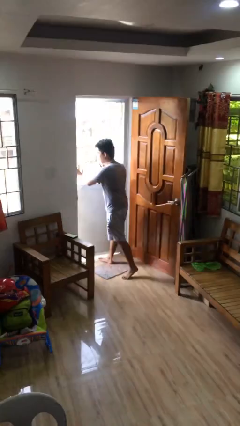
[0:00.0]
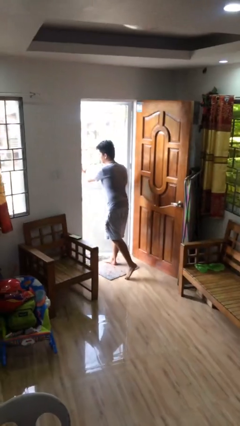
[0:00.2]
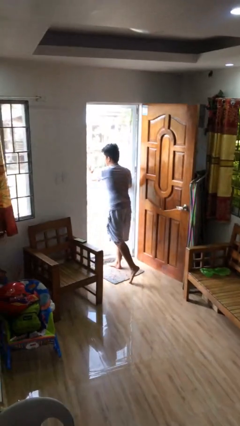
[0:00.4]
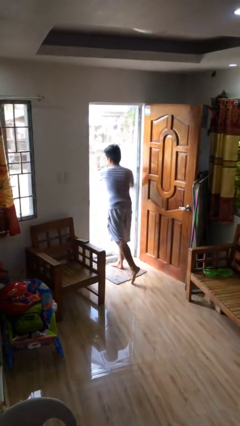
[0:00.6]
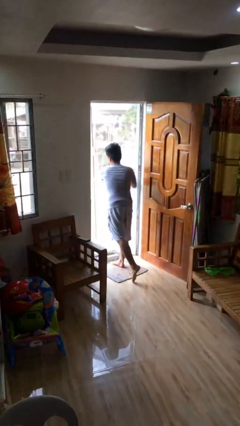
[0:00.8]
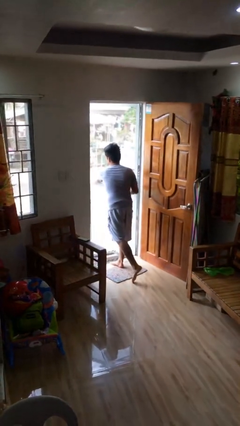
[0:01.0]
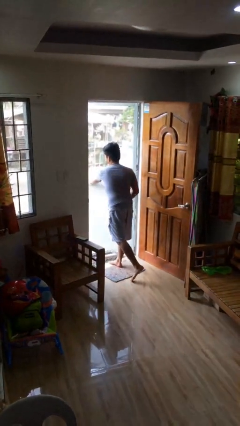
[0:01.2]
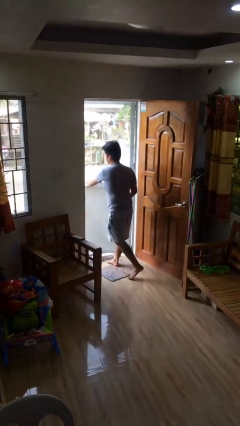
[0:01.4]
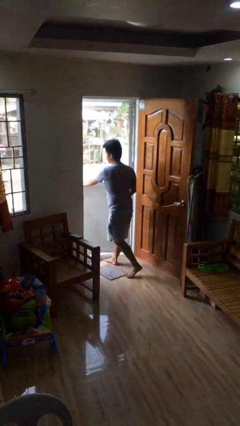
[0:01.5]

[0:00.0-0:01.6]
person opens facility door

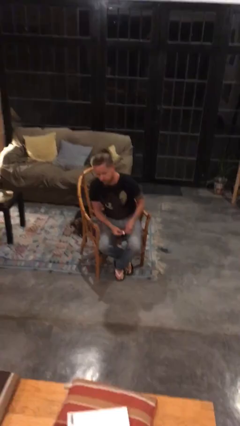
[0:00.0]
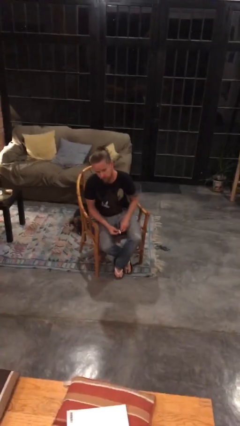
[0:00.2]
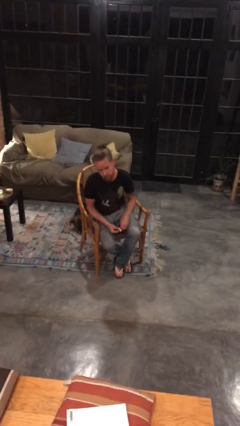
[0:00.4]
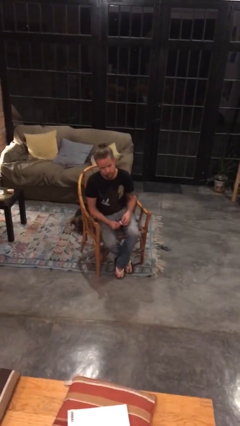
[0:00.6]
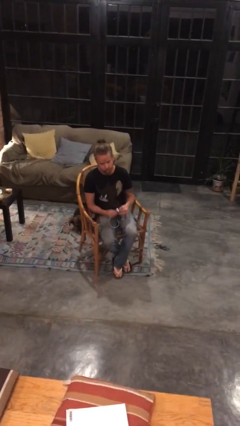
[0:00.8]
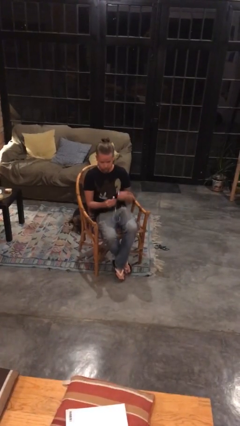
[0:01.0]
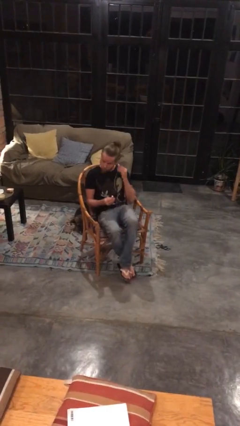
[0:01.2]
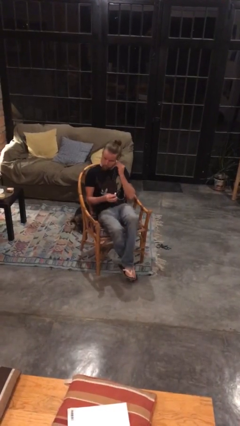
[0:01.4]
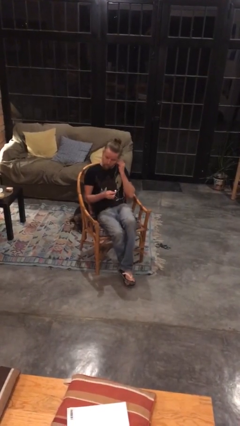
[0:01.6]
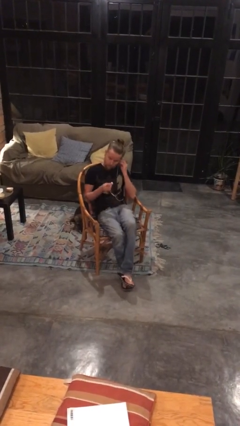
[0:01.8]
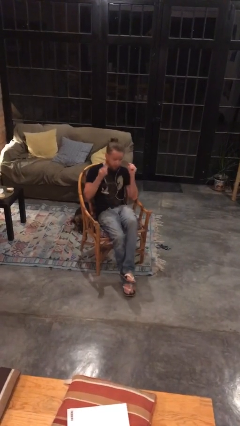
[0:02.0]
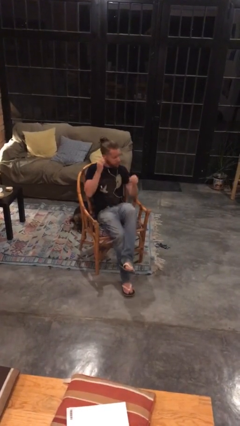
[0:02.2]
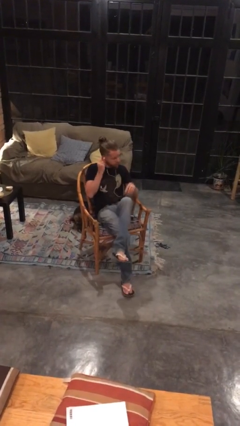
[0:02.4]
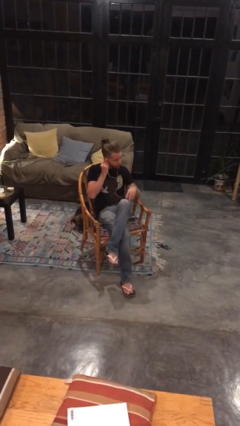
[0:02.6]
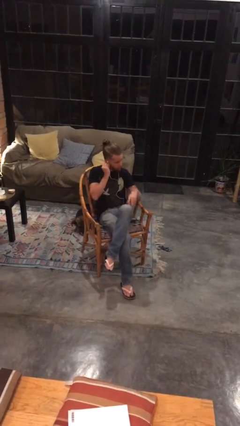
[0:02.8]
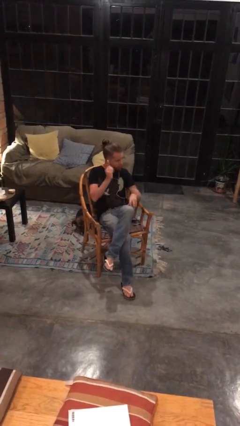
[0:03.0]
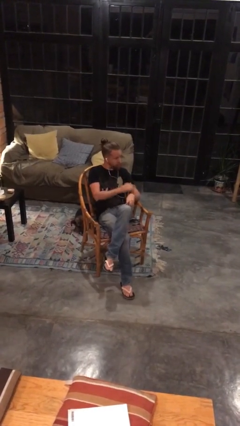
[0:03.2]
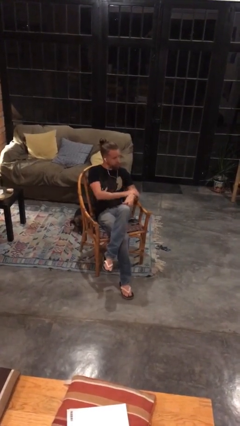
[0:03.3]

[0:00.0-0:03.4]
person puts on headphones

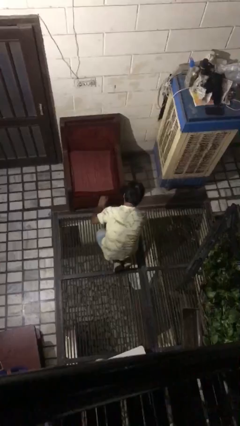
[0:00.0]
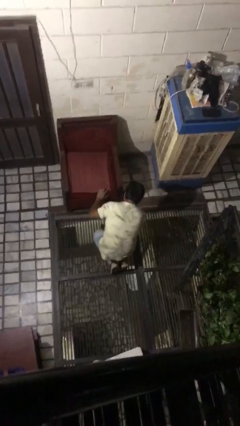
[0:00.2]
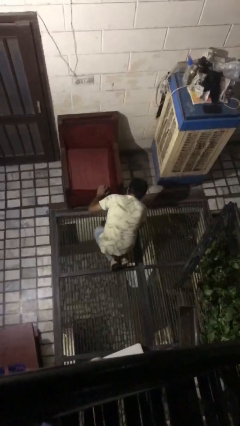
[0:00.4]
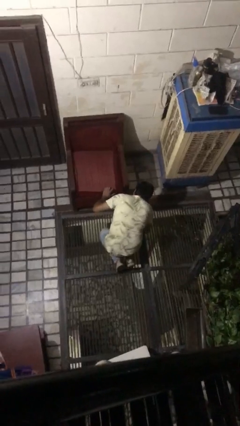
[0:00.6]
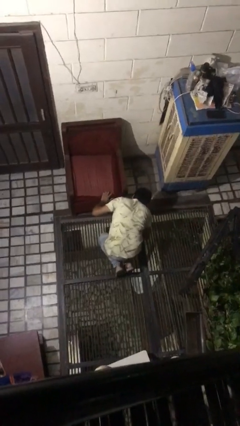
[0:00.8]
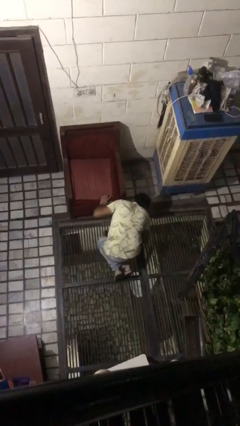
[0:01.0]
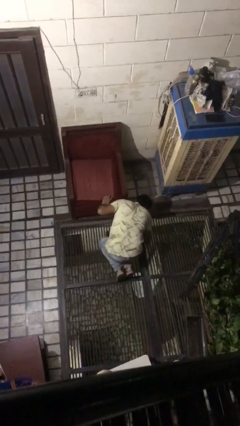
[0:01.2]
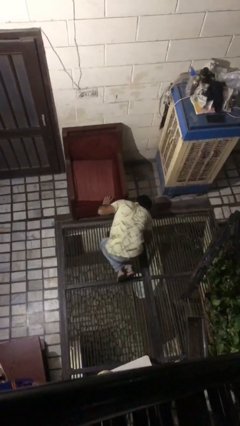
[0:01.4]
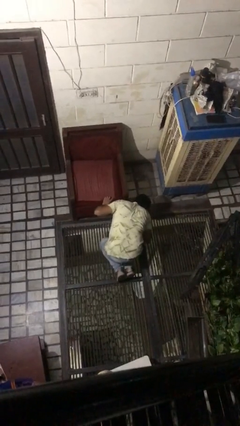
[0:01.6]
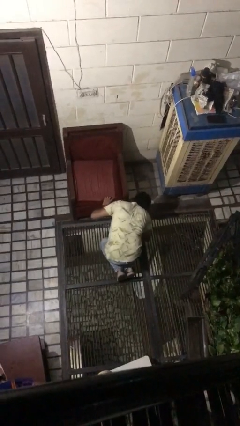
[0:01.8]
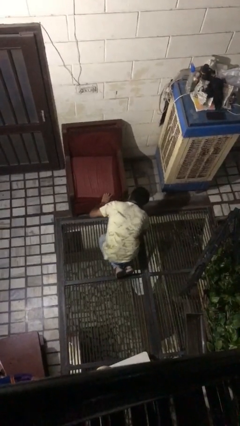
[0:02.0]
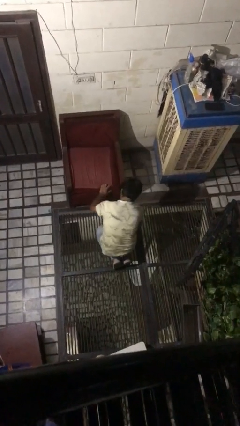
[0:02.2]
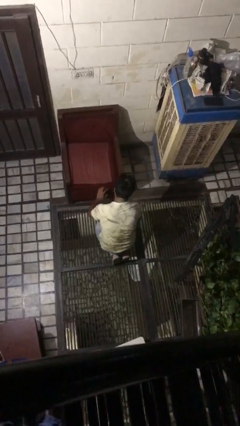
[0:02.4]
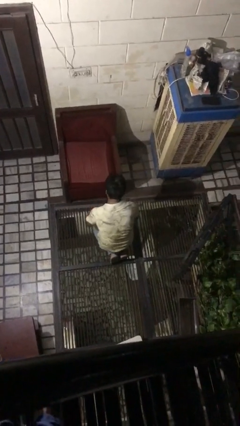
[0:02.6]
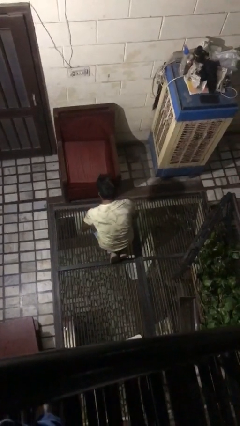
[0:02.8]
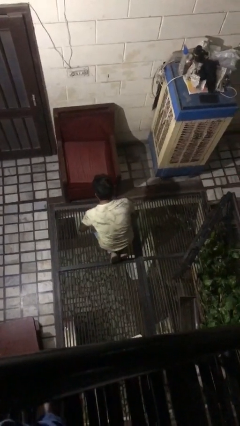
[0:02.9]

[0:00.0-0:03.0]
person searches under couch

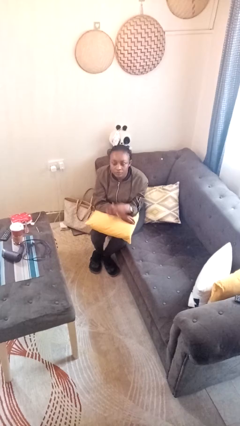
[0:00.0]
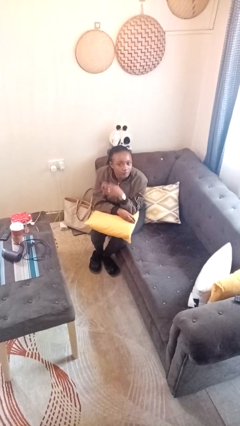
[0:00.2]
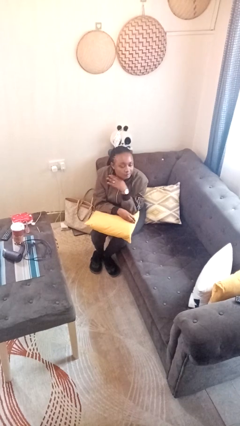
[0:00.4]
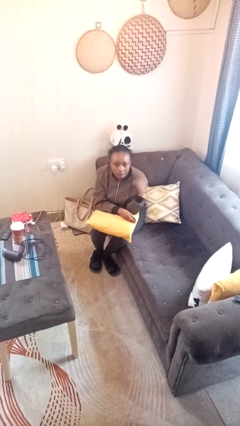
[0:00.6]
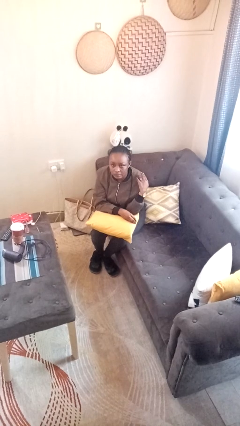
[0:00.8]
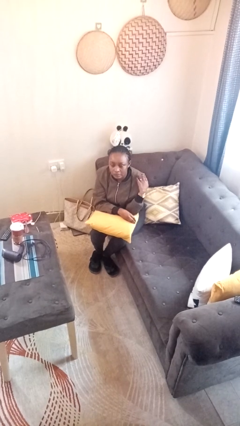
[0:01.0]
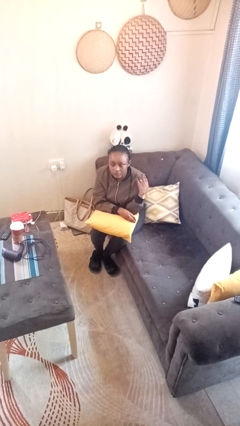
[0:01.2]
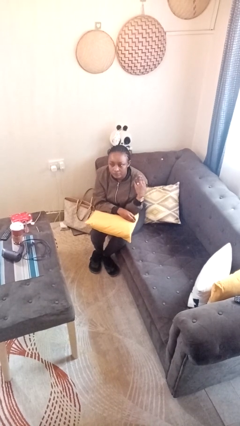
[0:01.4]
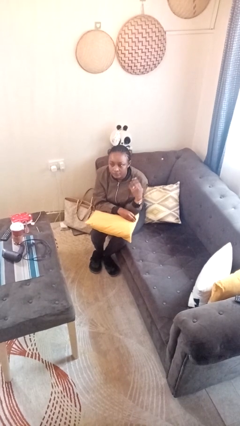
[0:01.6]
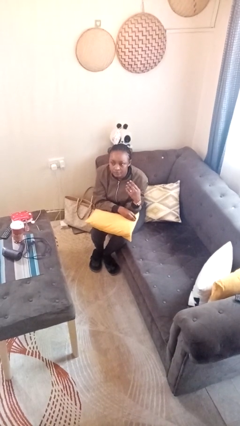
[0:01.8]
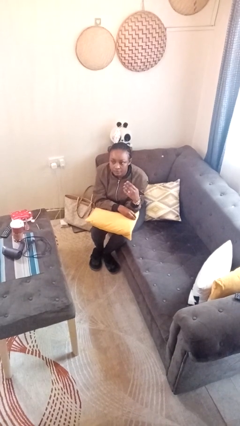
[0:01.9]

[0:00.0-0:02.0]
person gestures cut

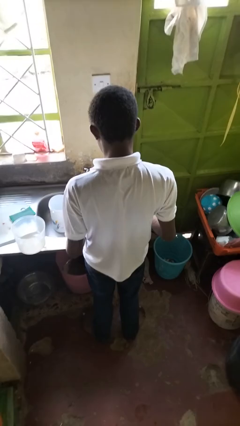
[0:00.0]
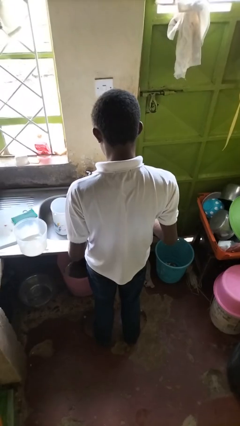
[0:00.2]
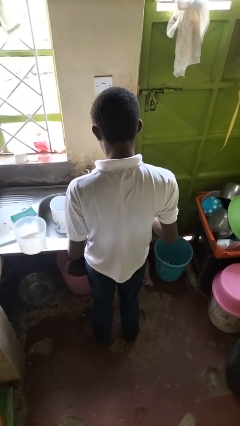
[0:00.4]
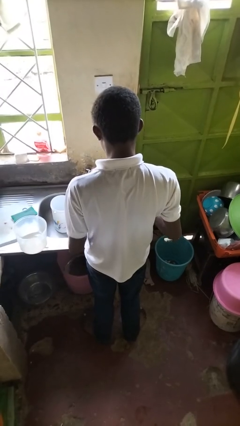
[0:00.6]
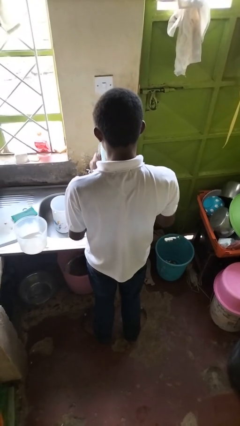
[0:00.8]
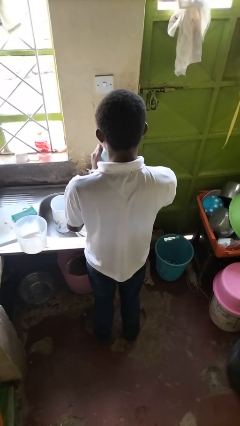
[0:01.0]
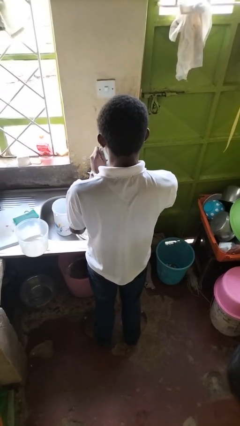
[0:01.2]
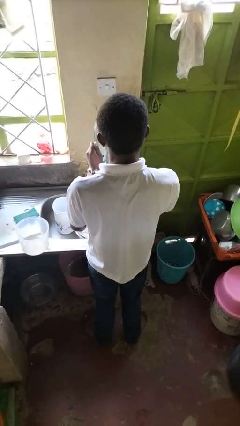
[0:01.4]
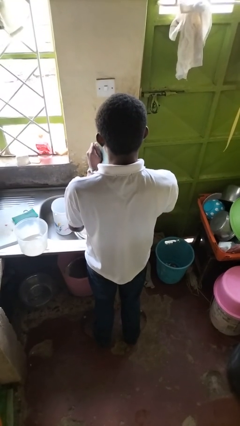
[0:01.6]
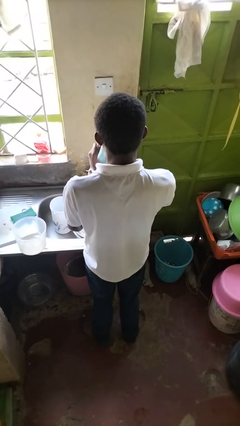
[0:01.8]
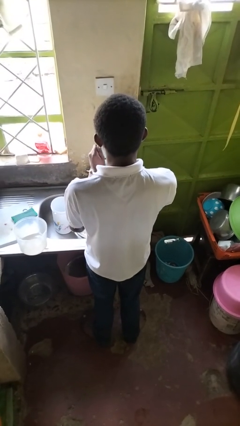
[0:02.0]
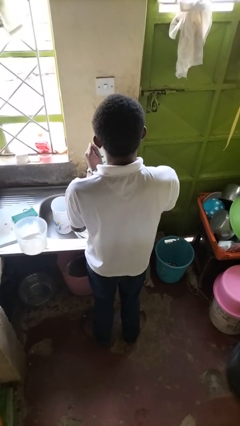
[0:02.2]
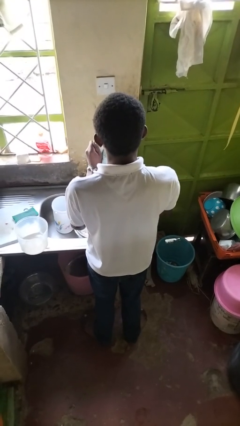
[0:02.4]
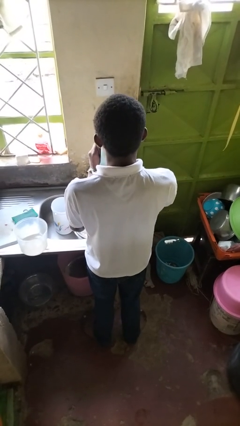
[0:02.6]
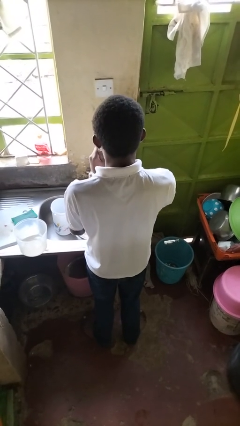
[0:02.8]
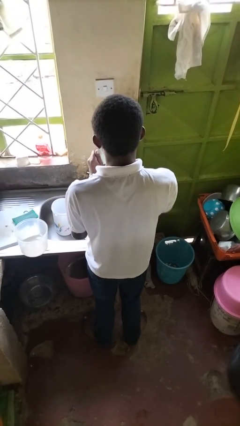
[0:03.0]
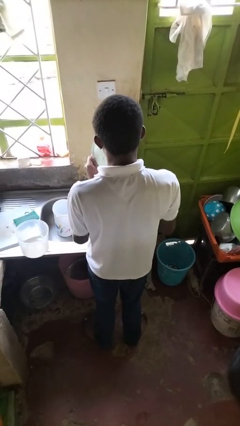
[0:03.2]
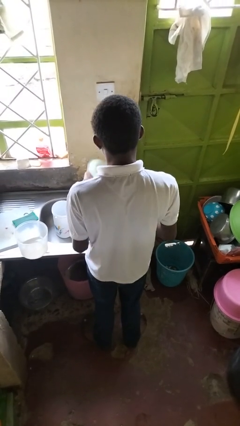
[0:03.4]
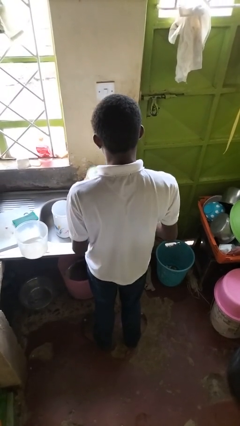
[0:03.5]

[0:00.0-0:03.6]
person dries dish

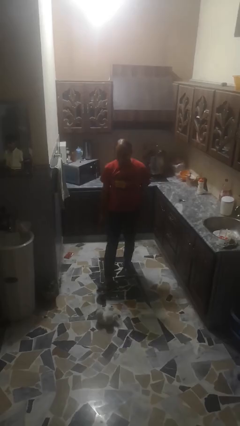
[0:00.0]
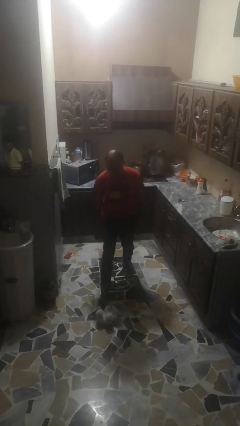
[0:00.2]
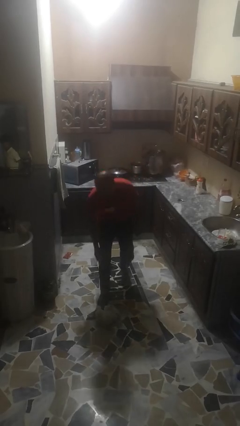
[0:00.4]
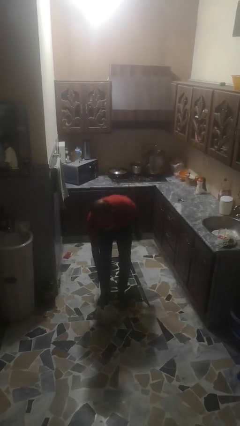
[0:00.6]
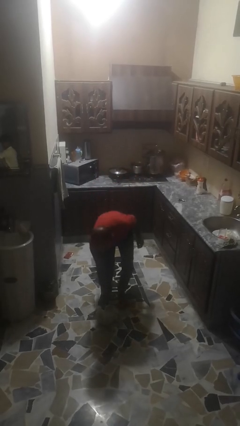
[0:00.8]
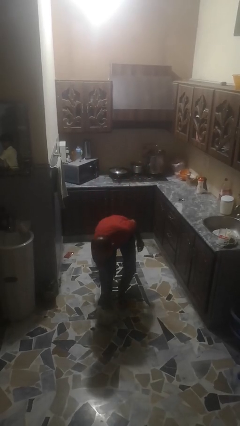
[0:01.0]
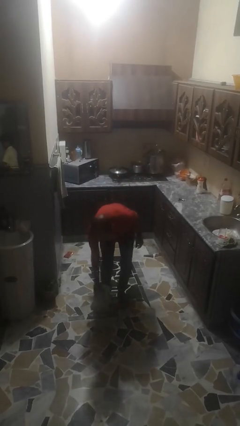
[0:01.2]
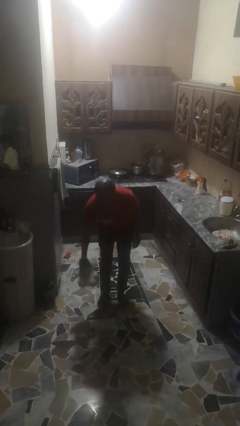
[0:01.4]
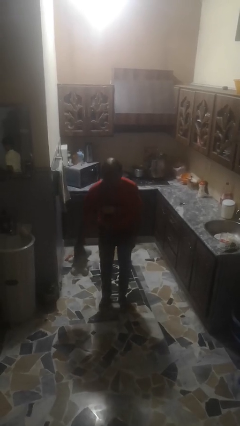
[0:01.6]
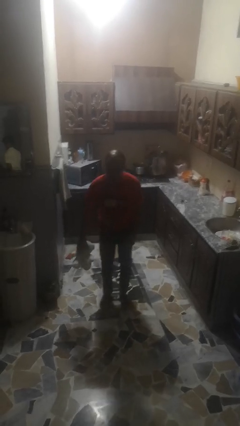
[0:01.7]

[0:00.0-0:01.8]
person picks up object from floor

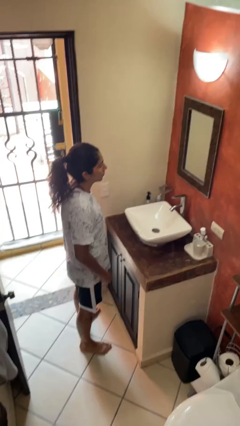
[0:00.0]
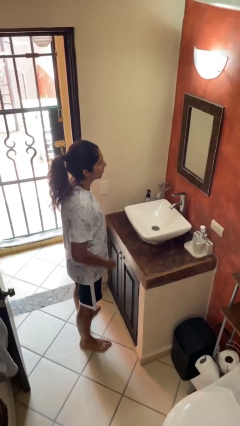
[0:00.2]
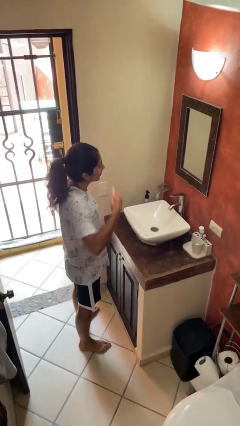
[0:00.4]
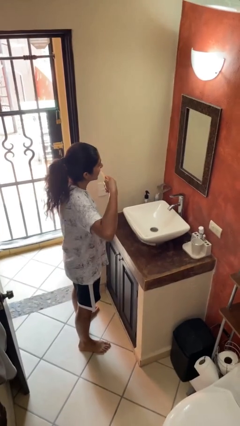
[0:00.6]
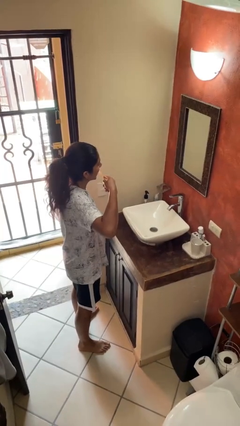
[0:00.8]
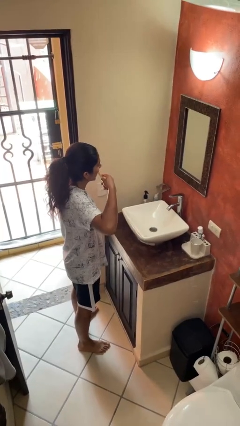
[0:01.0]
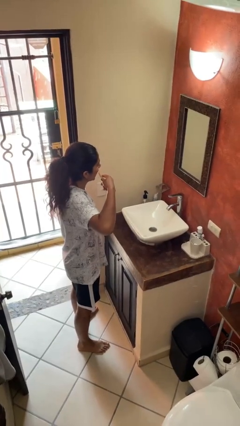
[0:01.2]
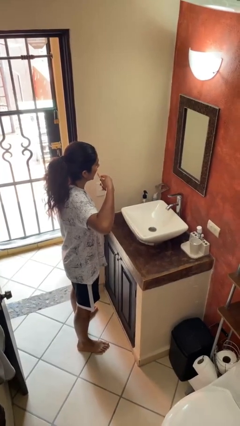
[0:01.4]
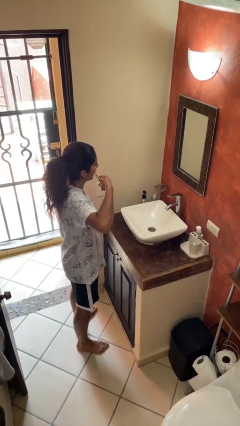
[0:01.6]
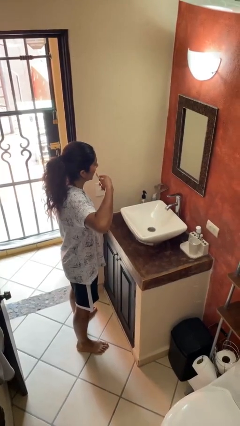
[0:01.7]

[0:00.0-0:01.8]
person brushes teeth
